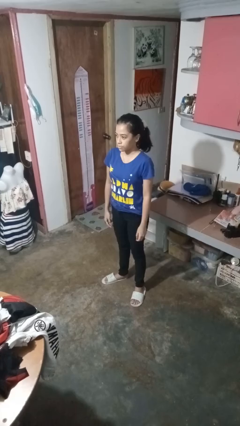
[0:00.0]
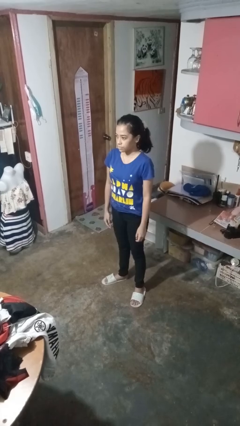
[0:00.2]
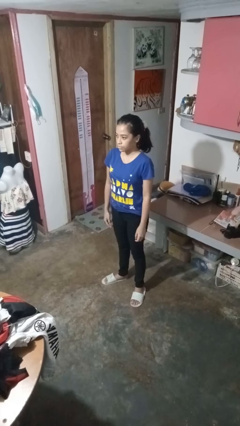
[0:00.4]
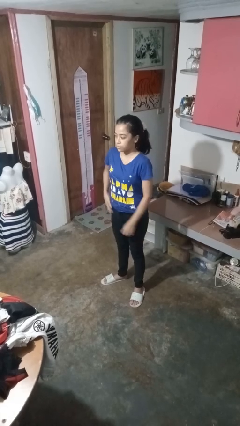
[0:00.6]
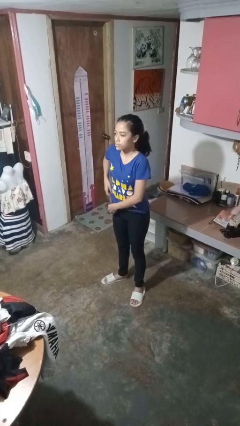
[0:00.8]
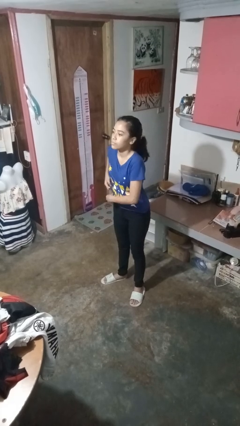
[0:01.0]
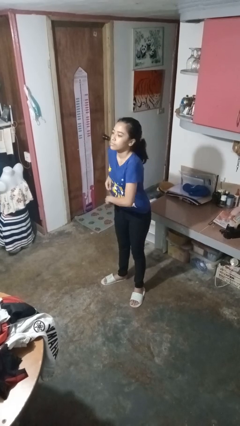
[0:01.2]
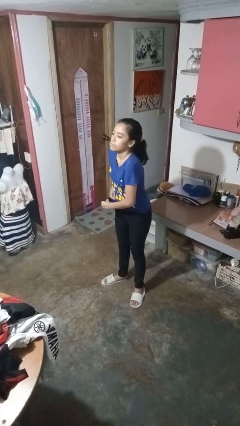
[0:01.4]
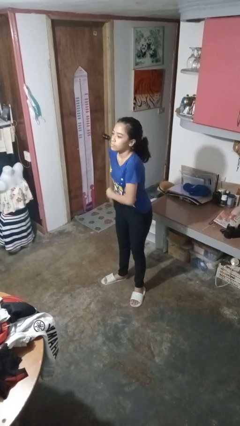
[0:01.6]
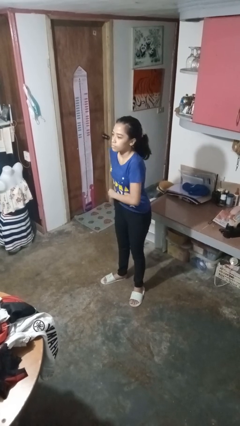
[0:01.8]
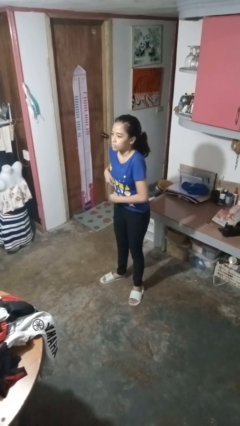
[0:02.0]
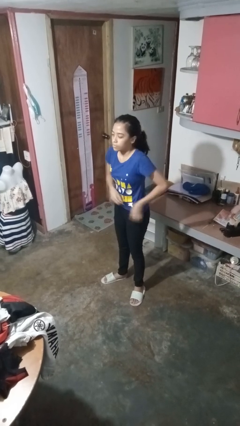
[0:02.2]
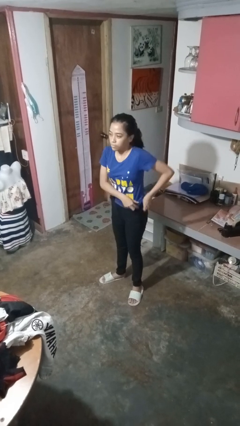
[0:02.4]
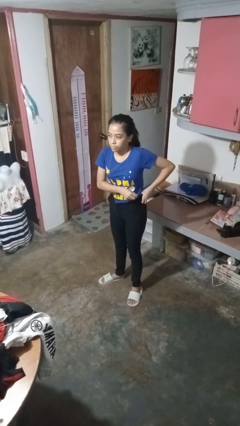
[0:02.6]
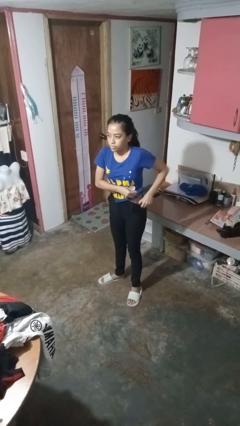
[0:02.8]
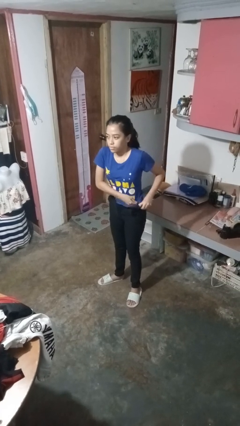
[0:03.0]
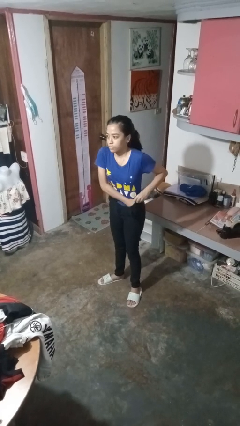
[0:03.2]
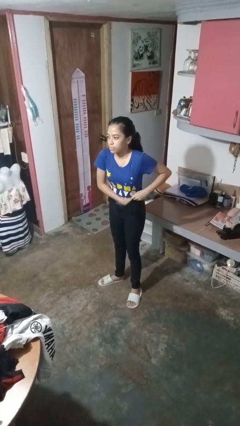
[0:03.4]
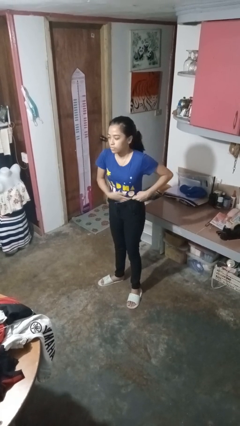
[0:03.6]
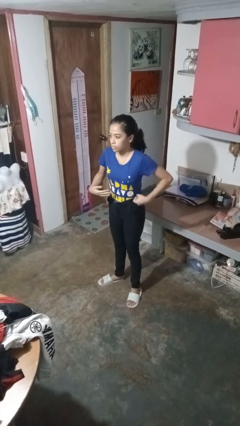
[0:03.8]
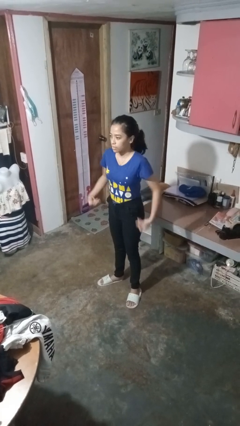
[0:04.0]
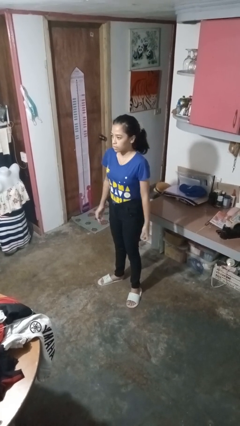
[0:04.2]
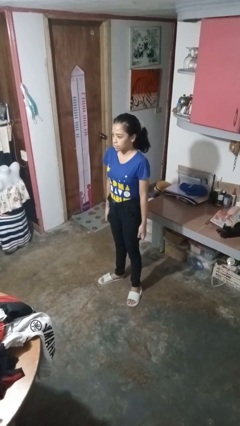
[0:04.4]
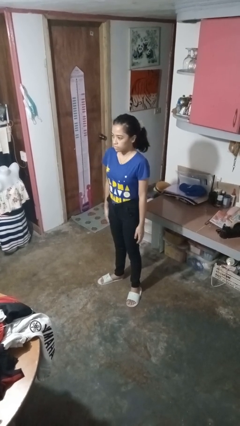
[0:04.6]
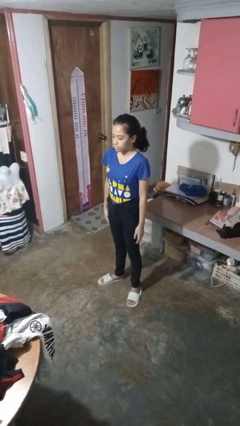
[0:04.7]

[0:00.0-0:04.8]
person tucks in shirt

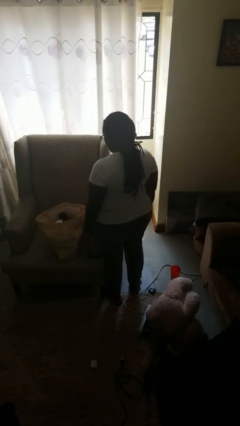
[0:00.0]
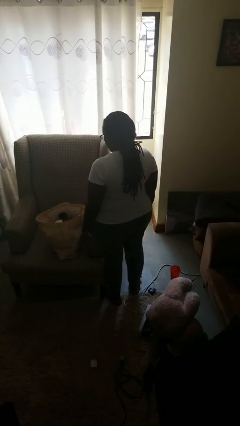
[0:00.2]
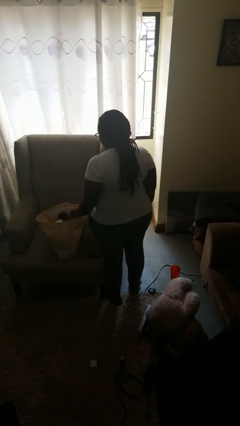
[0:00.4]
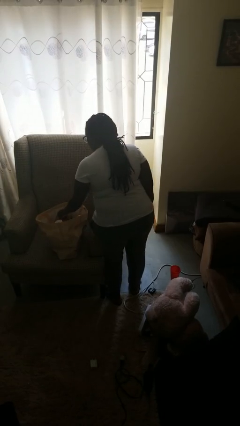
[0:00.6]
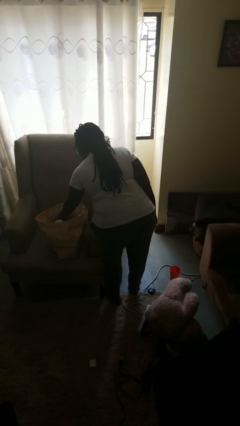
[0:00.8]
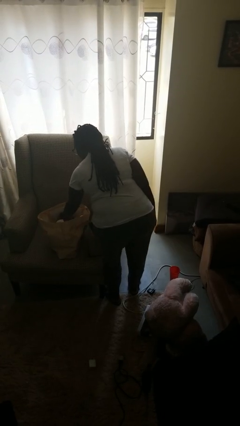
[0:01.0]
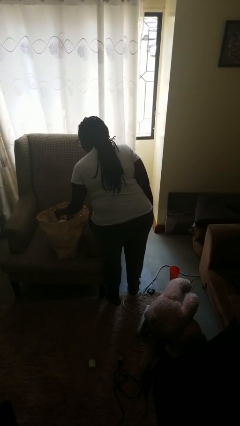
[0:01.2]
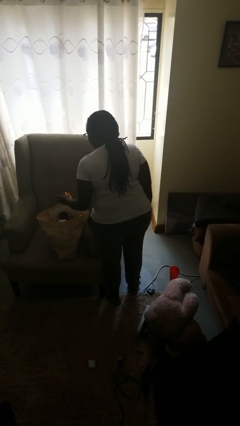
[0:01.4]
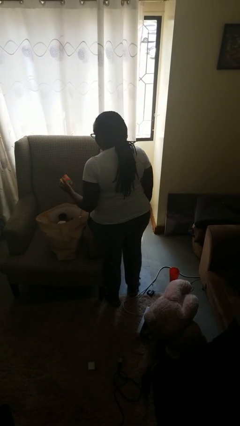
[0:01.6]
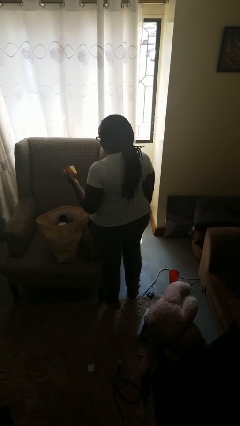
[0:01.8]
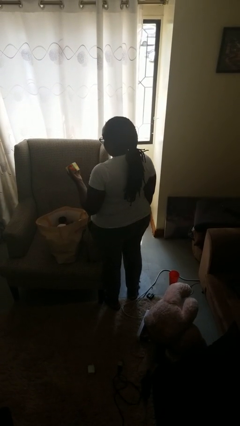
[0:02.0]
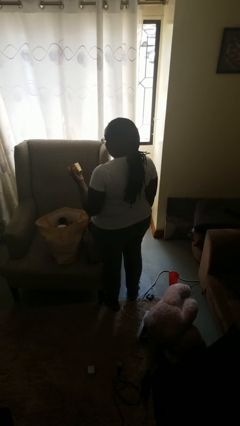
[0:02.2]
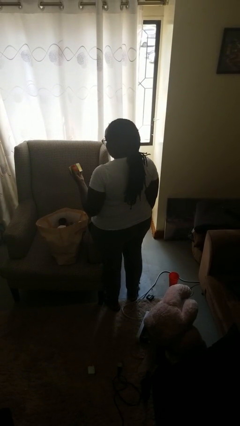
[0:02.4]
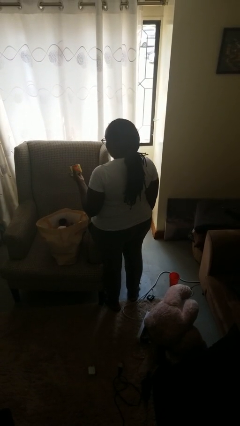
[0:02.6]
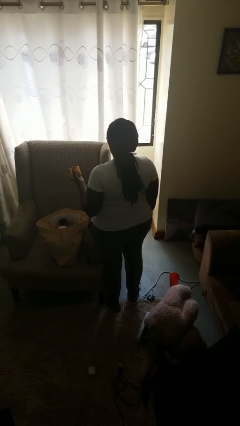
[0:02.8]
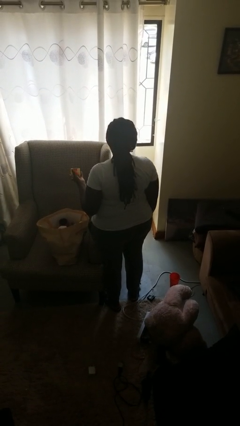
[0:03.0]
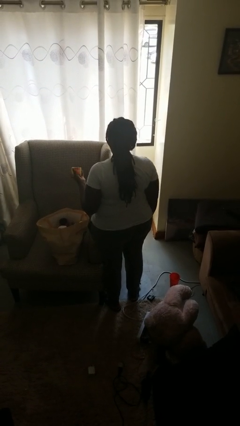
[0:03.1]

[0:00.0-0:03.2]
person takes object from bag

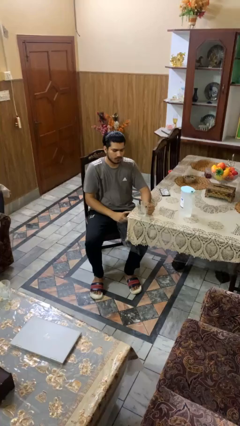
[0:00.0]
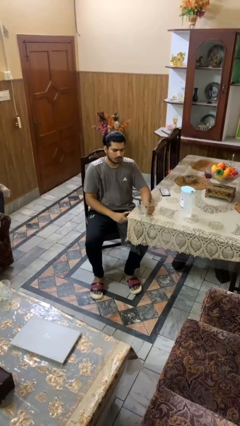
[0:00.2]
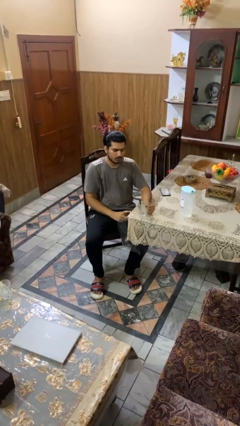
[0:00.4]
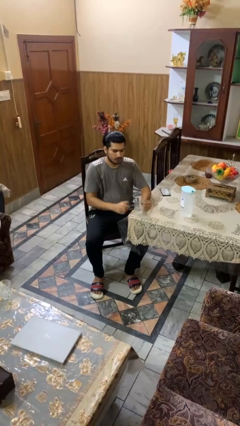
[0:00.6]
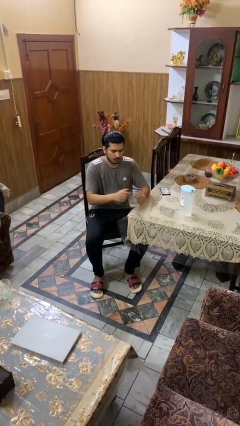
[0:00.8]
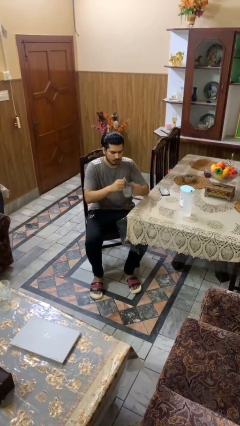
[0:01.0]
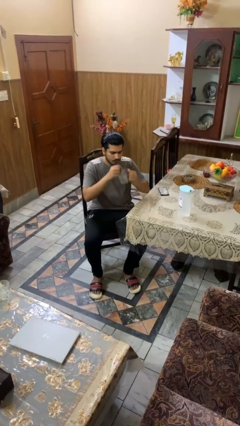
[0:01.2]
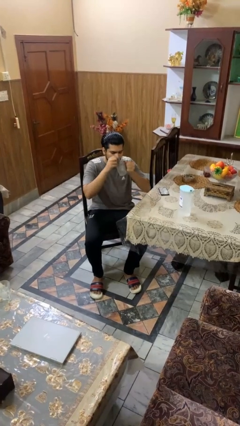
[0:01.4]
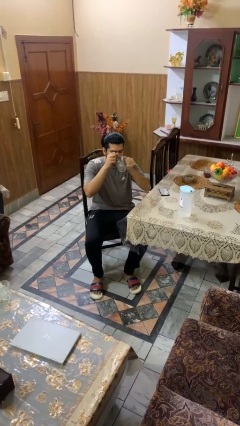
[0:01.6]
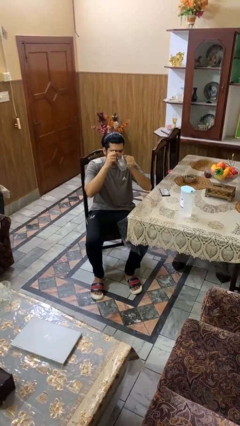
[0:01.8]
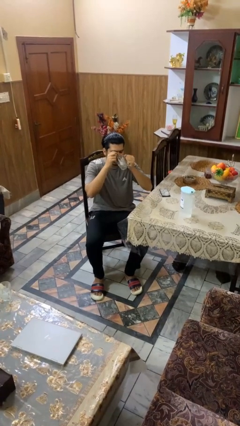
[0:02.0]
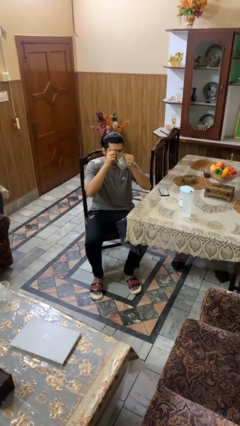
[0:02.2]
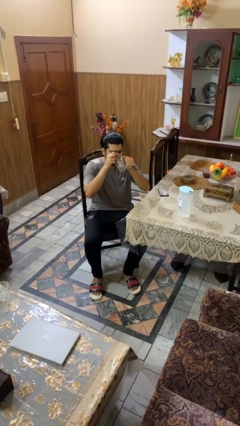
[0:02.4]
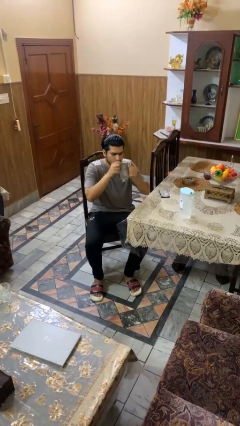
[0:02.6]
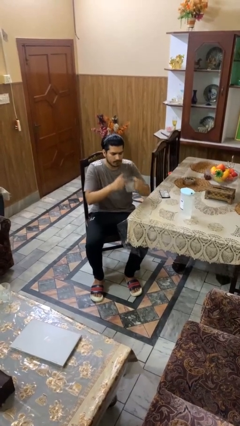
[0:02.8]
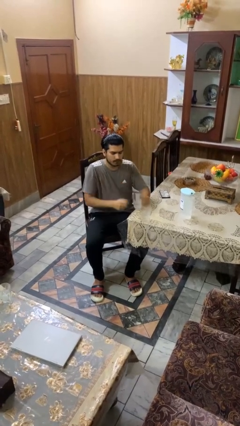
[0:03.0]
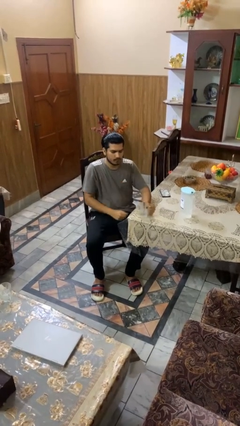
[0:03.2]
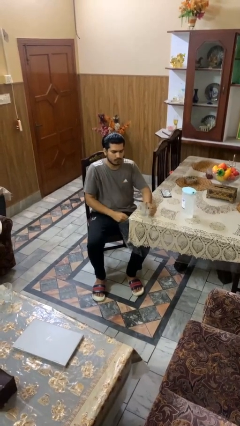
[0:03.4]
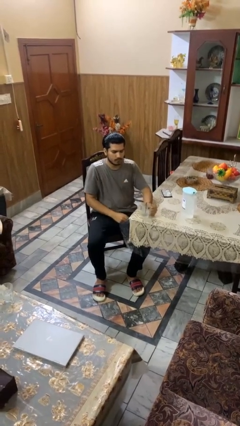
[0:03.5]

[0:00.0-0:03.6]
person drinks from mug

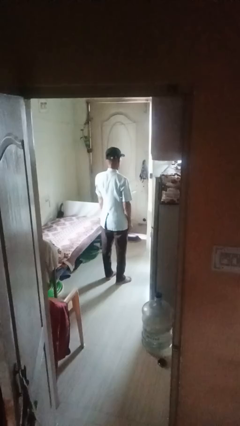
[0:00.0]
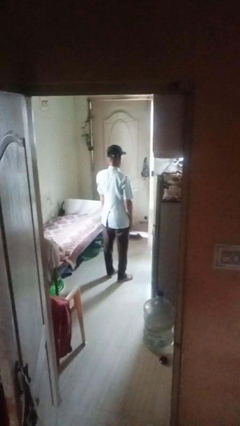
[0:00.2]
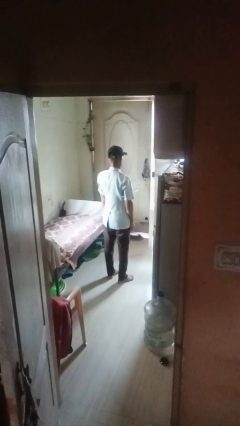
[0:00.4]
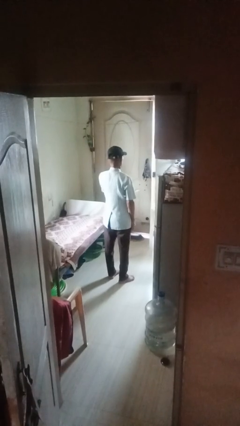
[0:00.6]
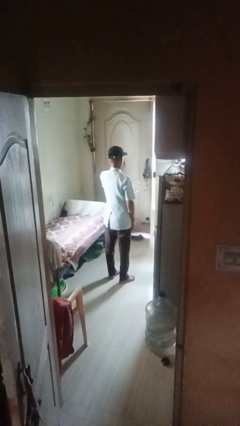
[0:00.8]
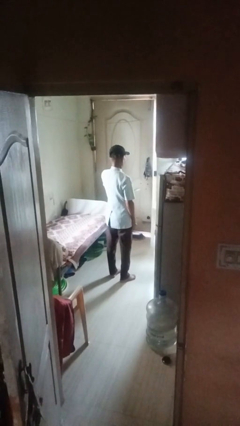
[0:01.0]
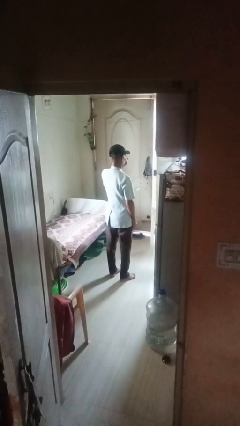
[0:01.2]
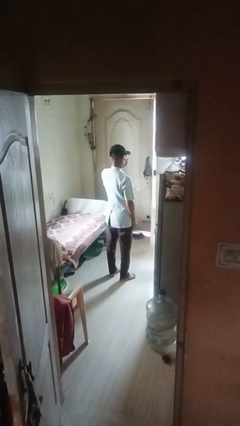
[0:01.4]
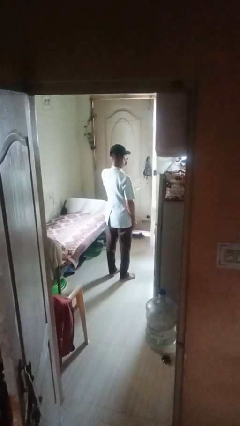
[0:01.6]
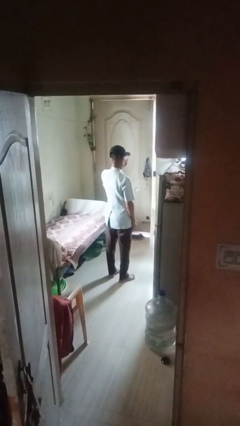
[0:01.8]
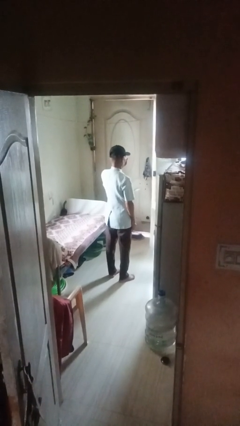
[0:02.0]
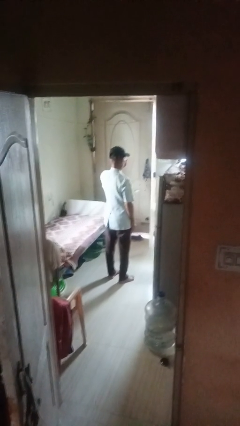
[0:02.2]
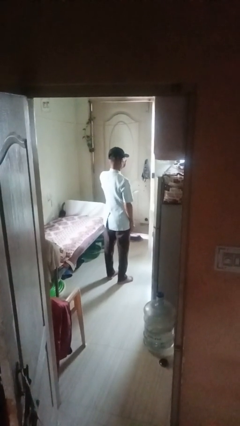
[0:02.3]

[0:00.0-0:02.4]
person gestures stop

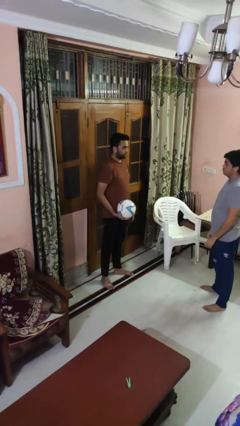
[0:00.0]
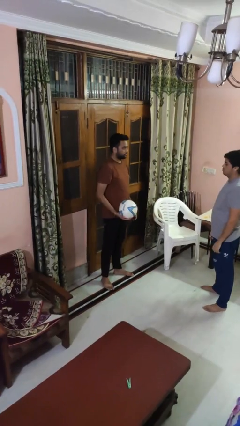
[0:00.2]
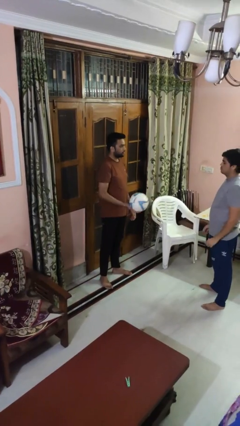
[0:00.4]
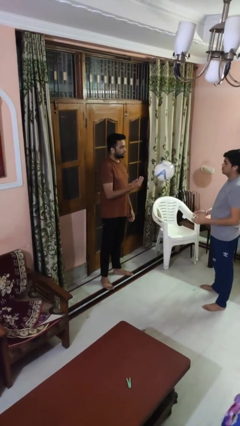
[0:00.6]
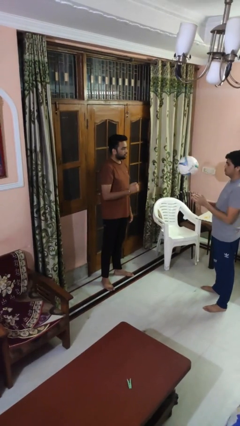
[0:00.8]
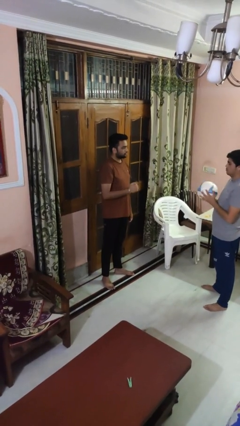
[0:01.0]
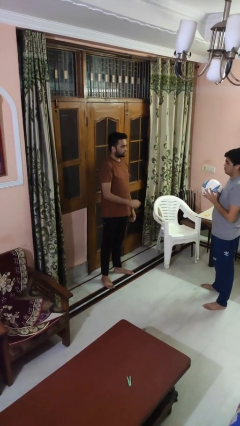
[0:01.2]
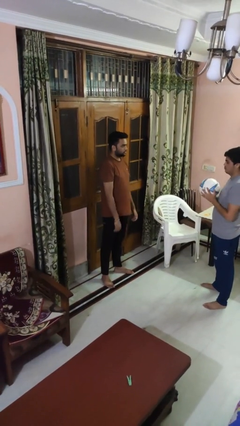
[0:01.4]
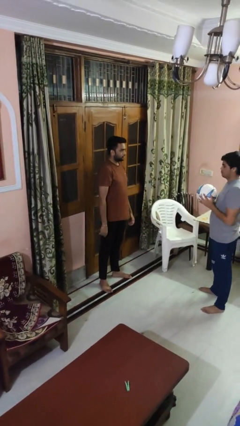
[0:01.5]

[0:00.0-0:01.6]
person throws object to person

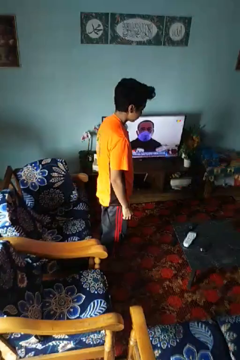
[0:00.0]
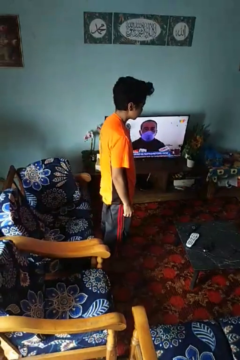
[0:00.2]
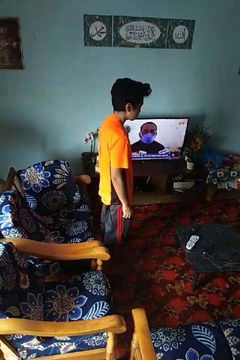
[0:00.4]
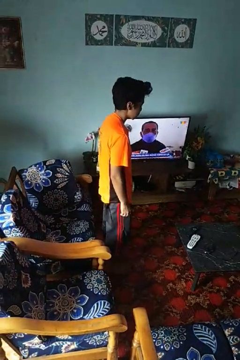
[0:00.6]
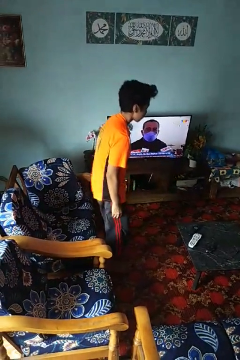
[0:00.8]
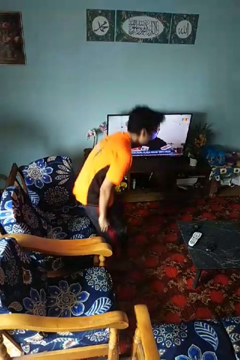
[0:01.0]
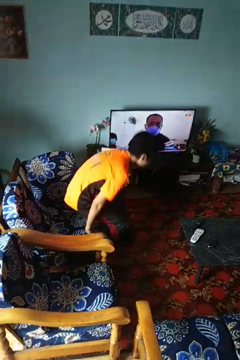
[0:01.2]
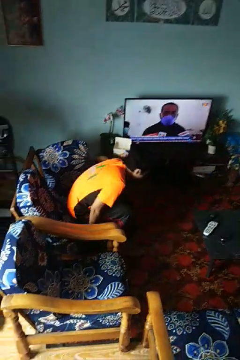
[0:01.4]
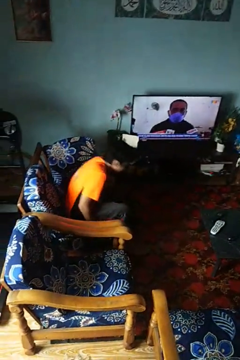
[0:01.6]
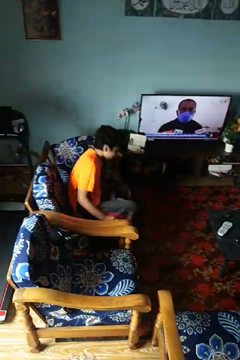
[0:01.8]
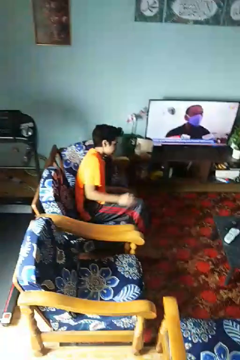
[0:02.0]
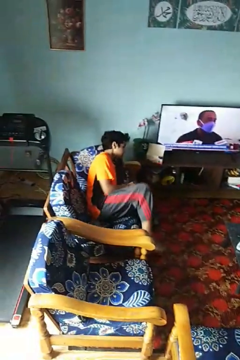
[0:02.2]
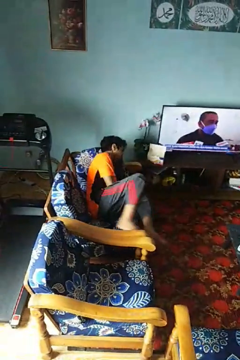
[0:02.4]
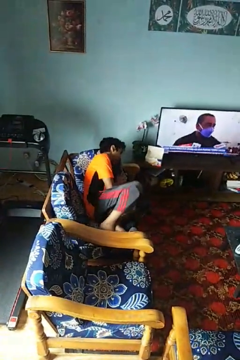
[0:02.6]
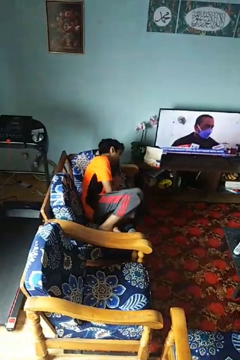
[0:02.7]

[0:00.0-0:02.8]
person lies down on couch
